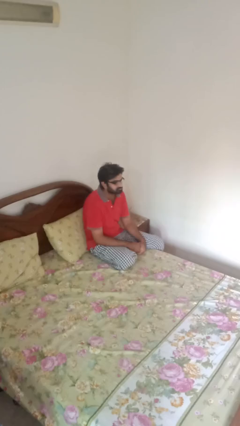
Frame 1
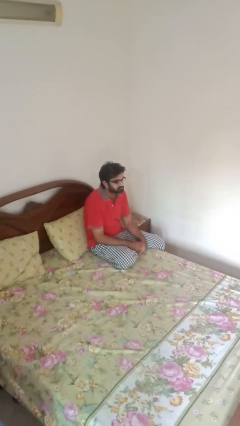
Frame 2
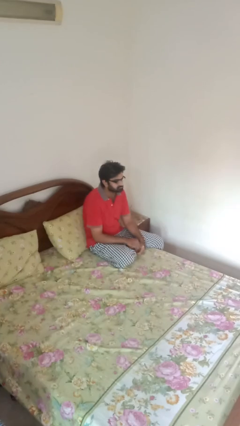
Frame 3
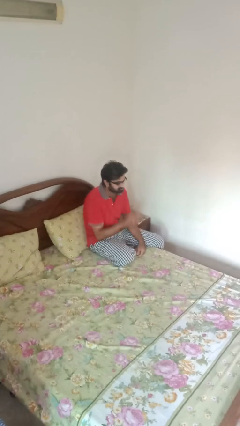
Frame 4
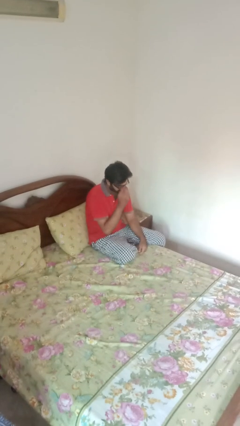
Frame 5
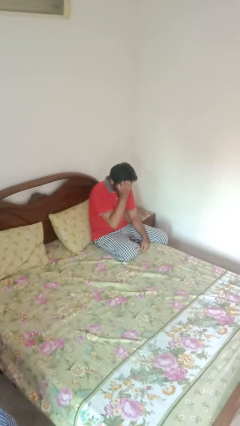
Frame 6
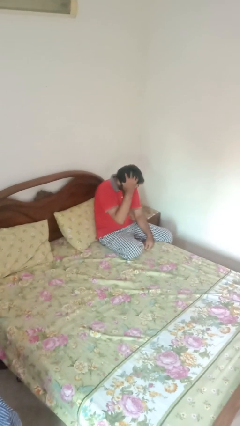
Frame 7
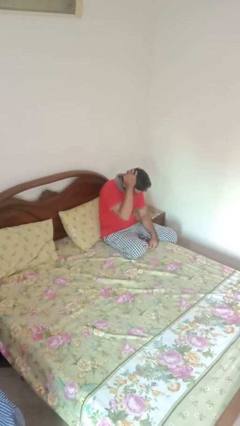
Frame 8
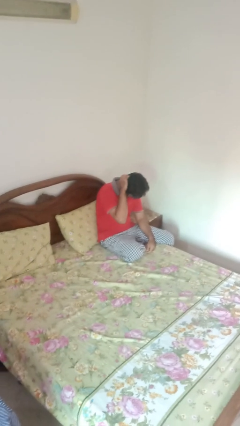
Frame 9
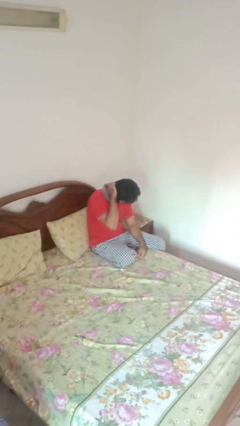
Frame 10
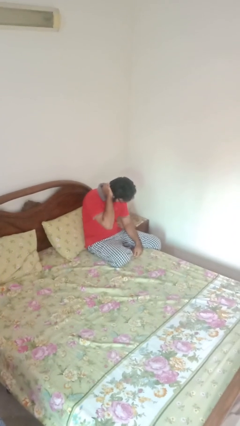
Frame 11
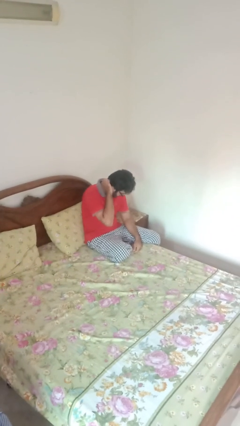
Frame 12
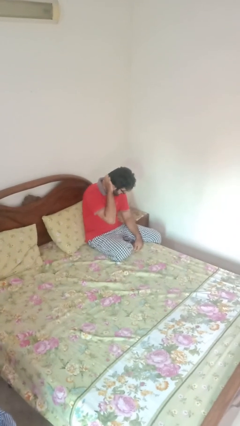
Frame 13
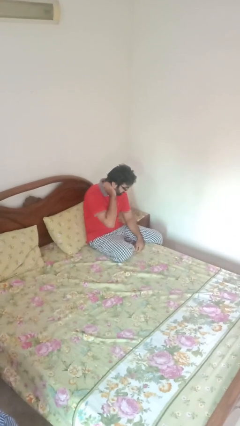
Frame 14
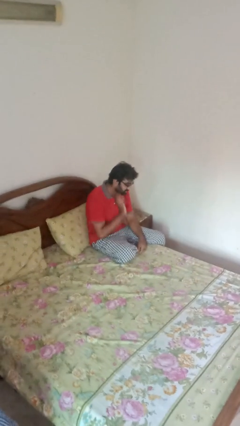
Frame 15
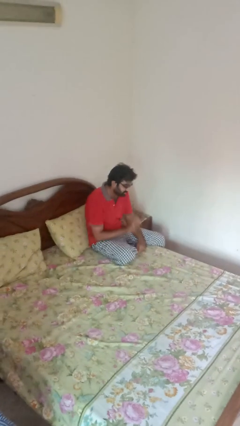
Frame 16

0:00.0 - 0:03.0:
person strokes hair

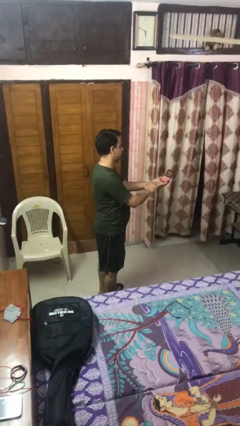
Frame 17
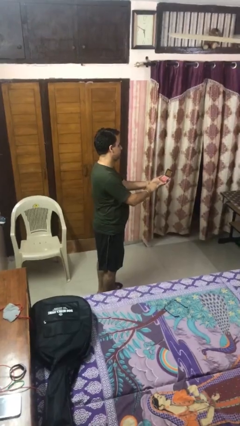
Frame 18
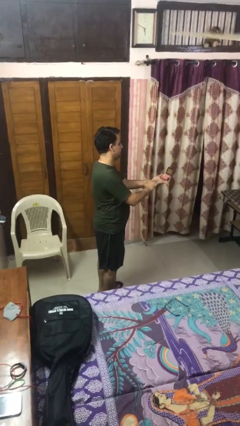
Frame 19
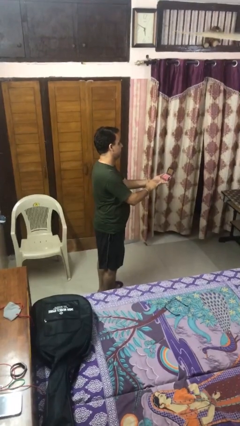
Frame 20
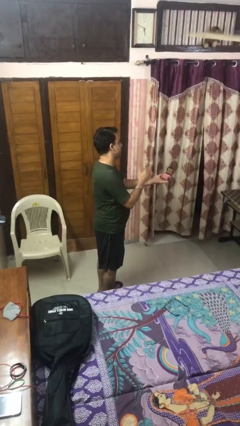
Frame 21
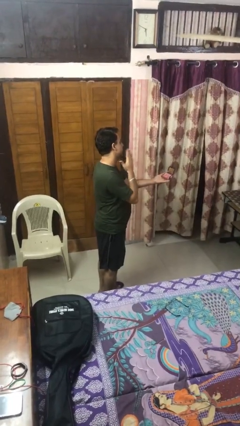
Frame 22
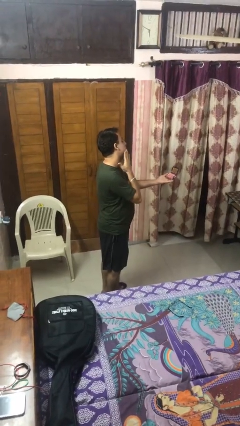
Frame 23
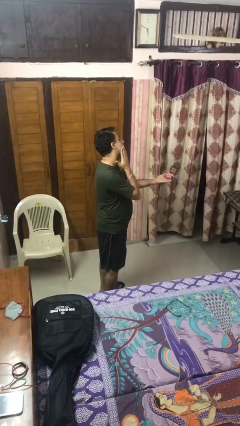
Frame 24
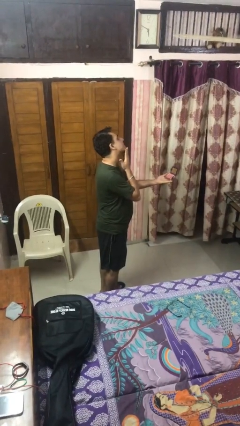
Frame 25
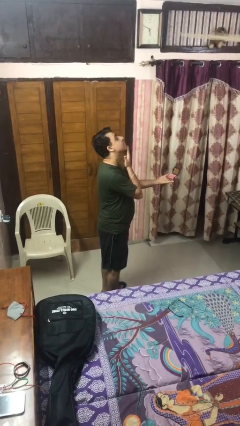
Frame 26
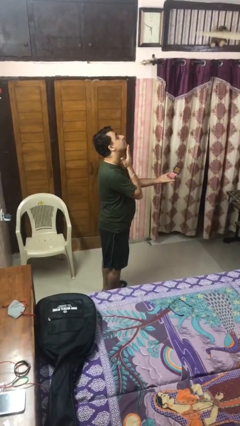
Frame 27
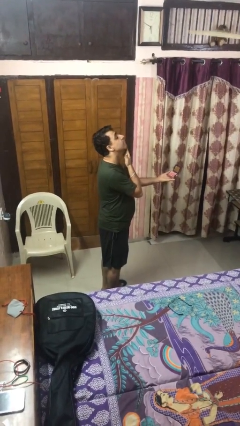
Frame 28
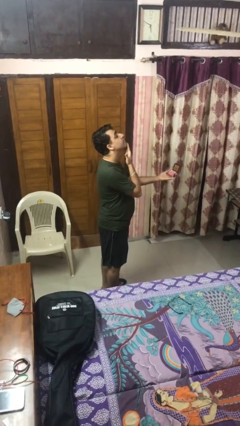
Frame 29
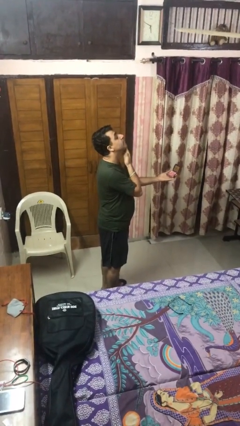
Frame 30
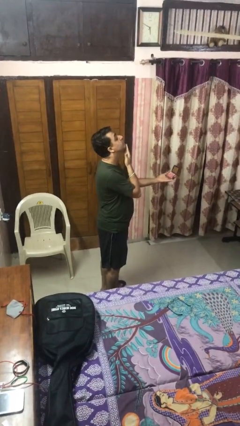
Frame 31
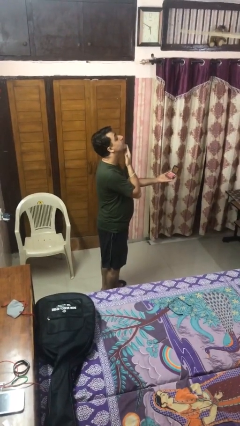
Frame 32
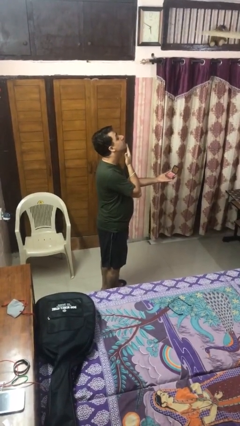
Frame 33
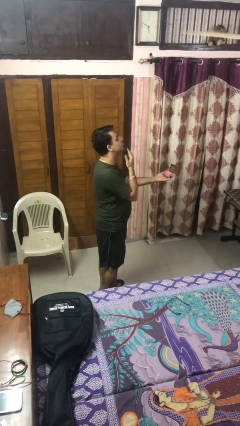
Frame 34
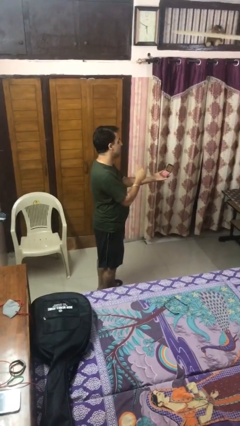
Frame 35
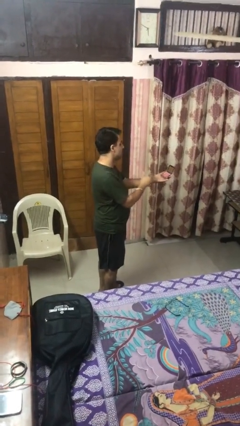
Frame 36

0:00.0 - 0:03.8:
person applies foundation makeup

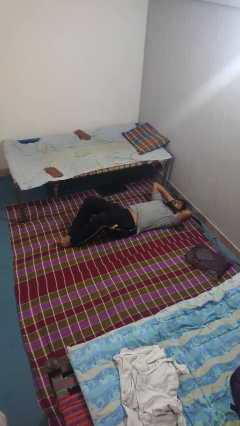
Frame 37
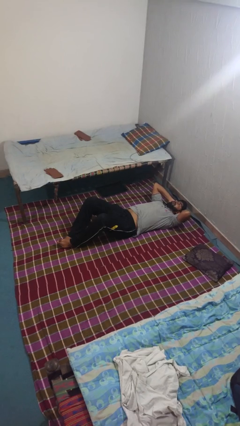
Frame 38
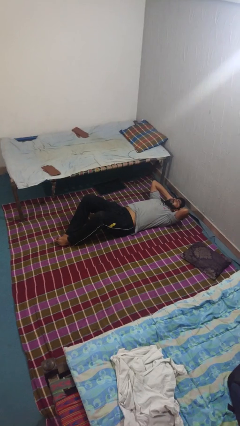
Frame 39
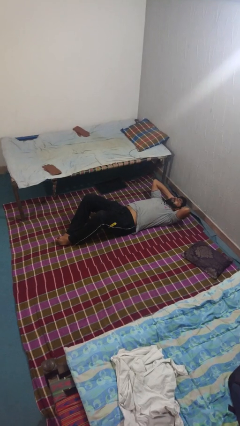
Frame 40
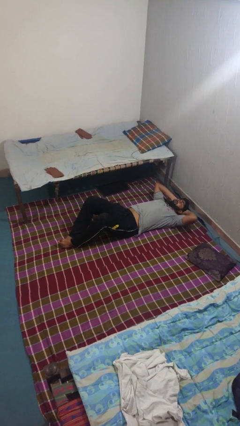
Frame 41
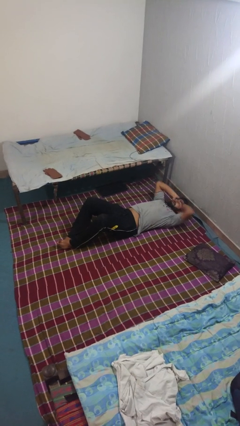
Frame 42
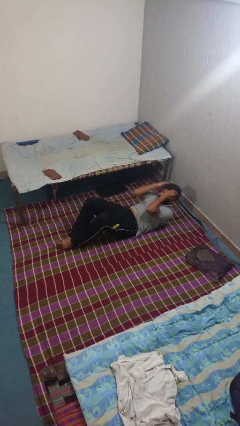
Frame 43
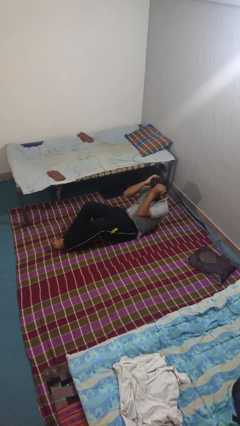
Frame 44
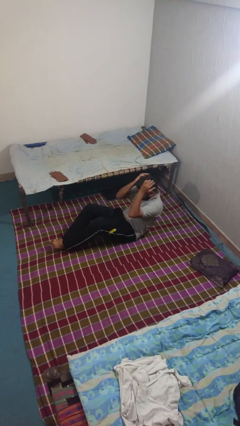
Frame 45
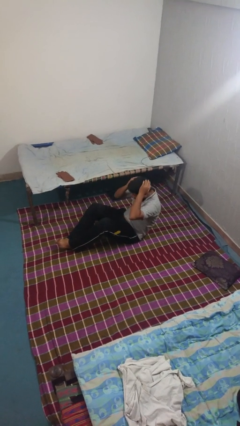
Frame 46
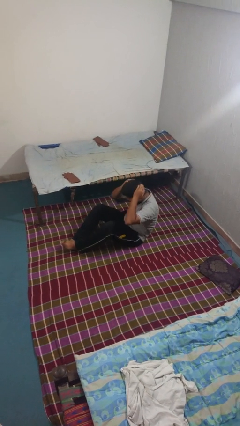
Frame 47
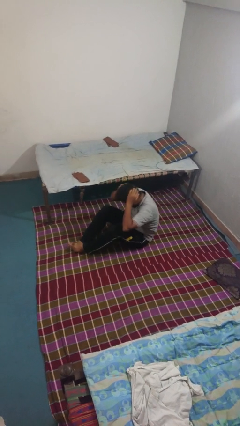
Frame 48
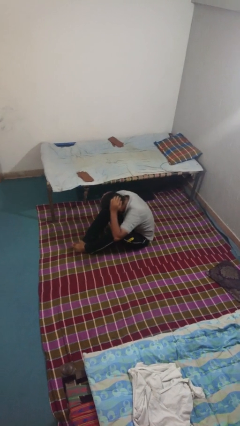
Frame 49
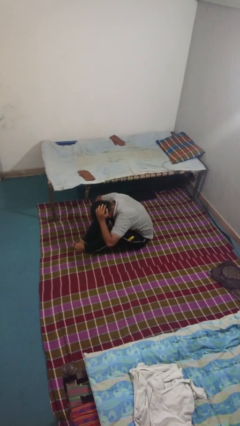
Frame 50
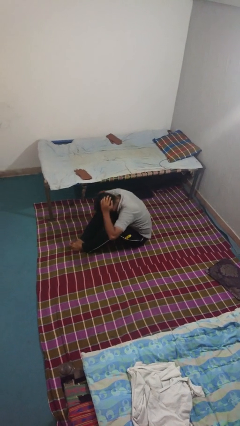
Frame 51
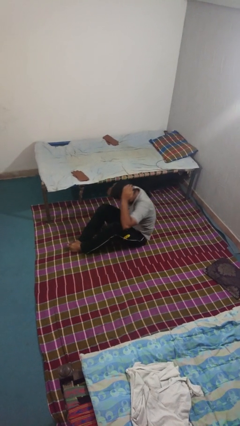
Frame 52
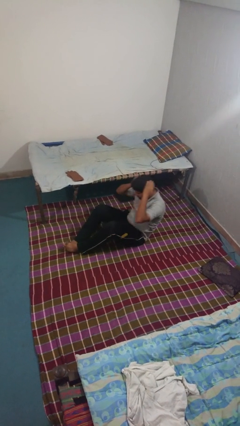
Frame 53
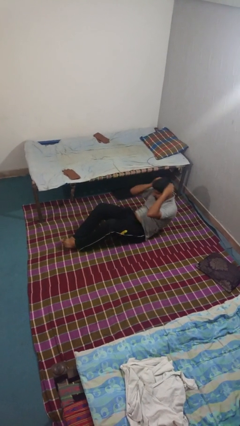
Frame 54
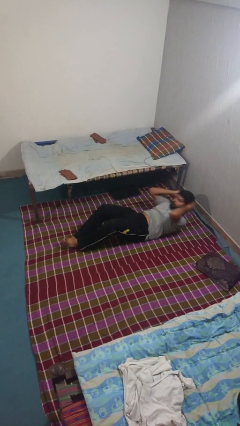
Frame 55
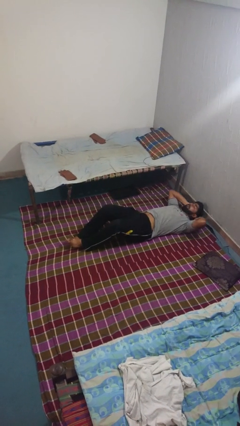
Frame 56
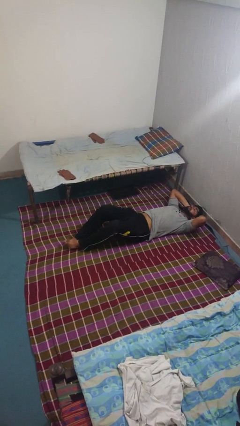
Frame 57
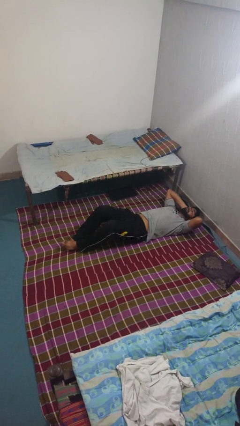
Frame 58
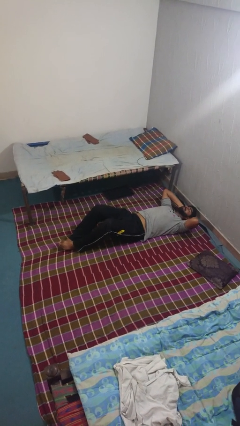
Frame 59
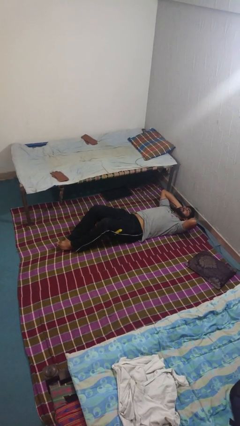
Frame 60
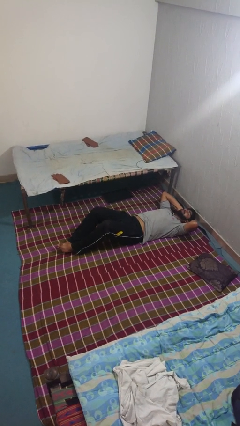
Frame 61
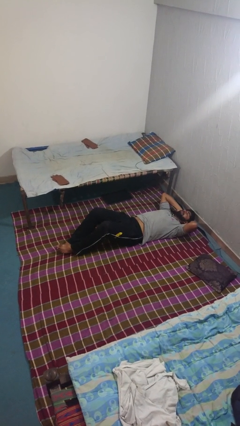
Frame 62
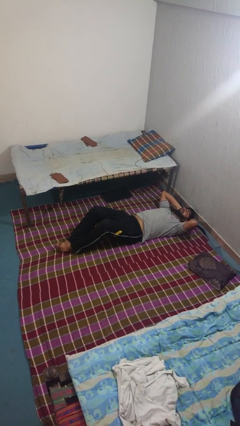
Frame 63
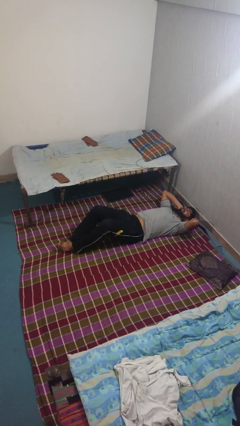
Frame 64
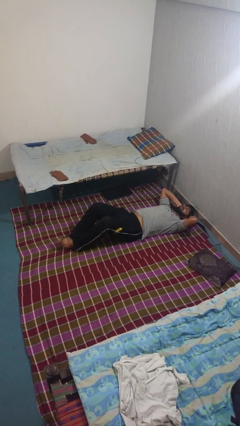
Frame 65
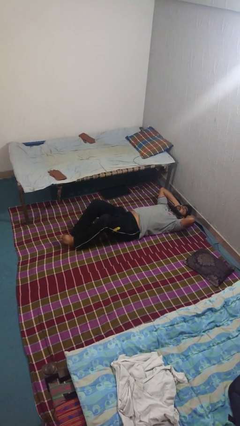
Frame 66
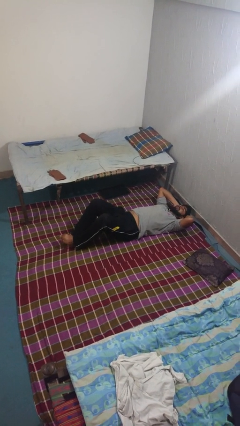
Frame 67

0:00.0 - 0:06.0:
person exercises with situp

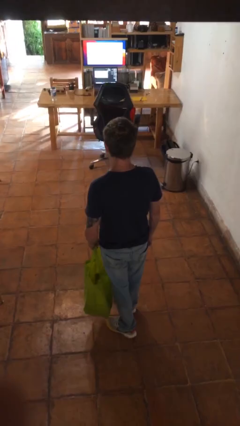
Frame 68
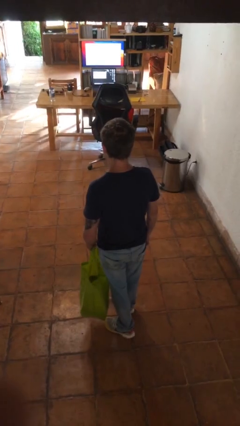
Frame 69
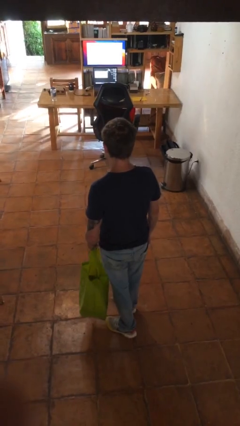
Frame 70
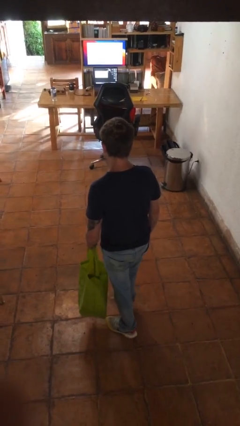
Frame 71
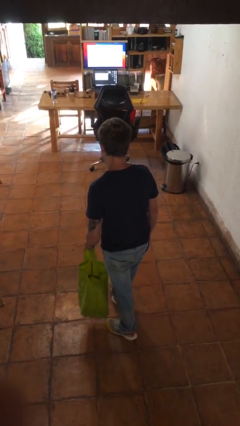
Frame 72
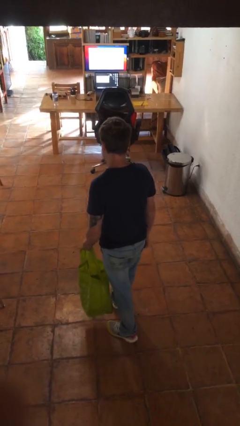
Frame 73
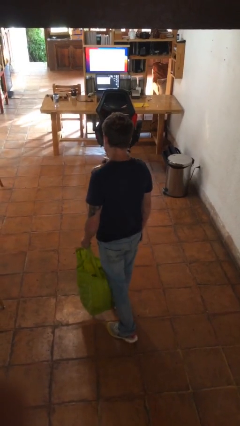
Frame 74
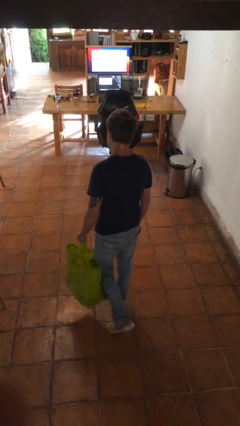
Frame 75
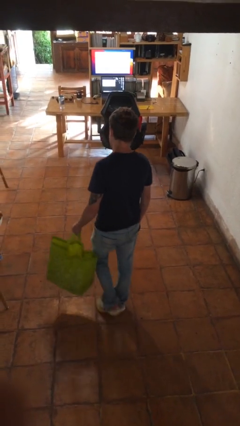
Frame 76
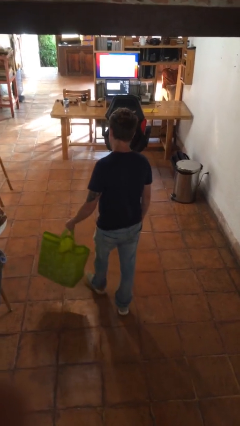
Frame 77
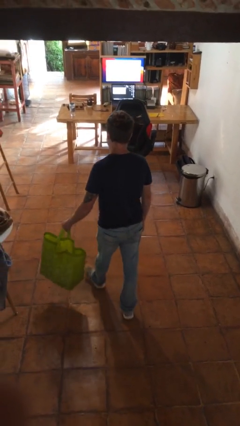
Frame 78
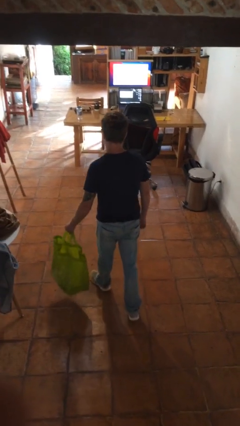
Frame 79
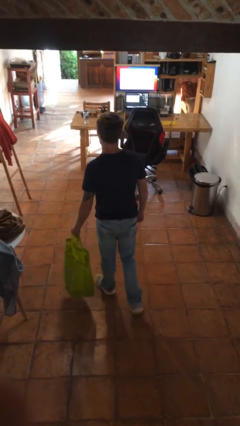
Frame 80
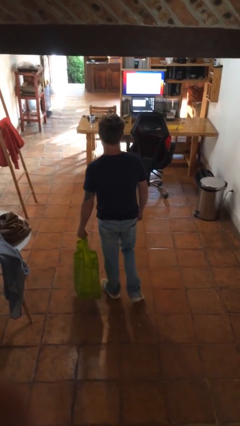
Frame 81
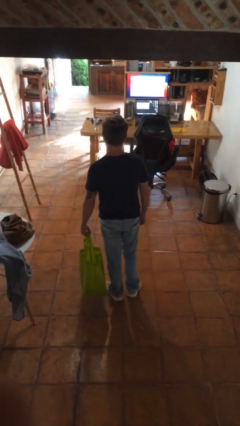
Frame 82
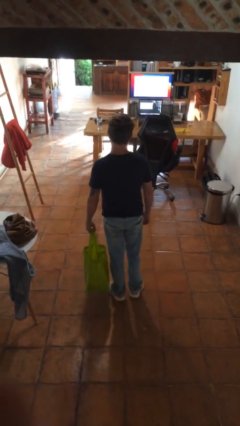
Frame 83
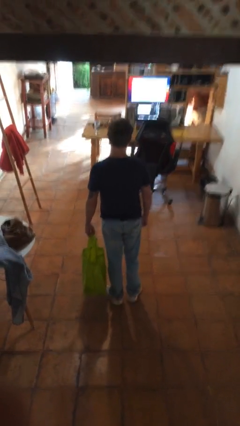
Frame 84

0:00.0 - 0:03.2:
person carries groceries

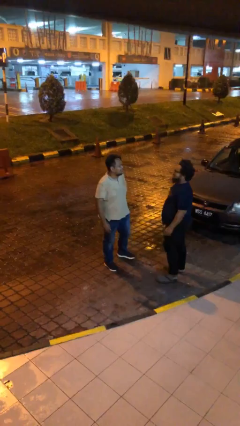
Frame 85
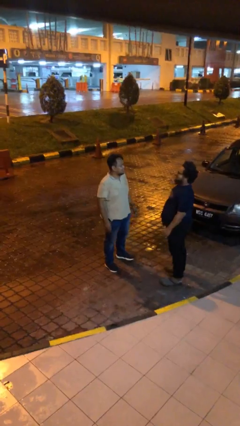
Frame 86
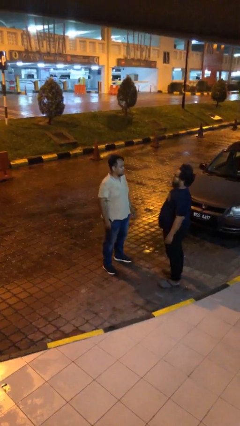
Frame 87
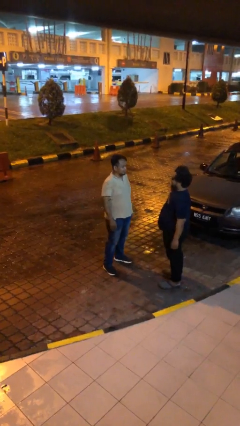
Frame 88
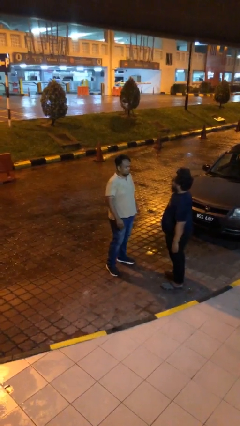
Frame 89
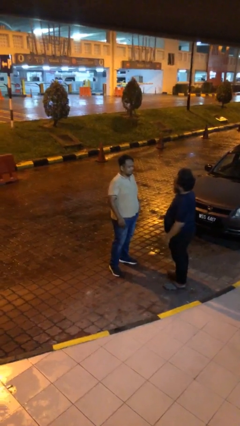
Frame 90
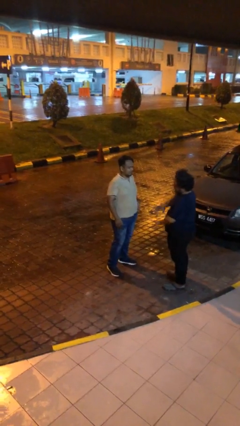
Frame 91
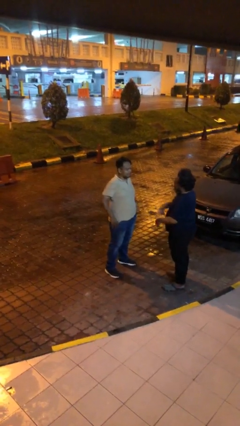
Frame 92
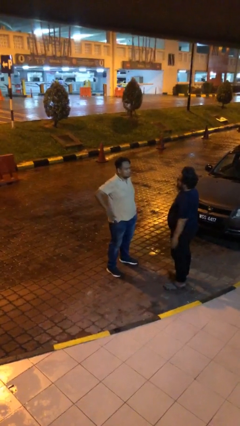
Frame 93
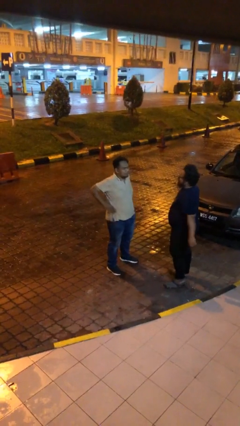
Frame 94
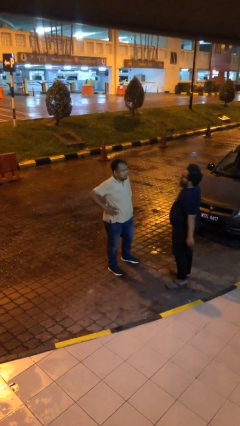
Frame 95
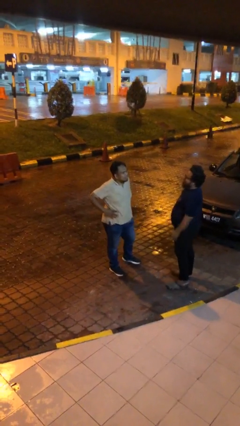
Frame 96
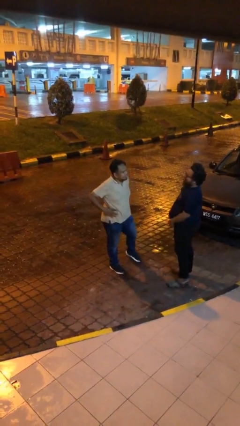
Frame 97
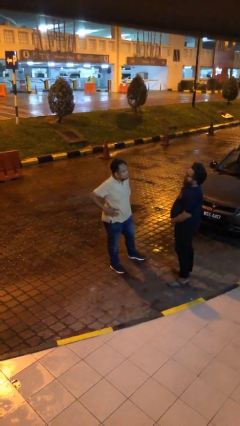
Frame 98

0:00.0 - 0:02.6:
person talks to person
